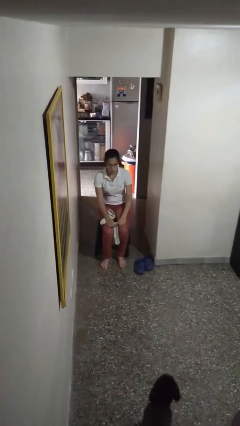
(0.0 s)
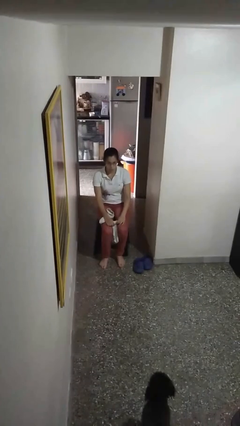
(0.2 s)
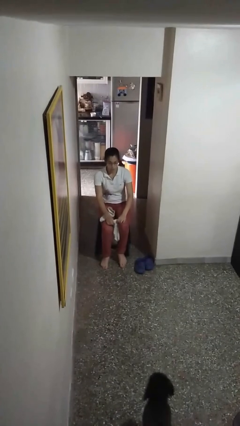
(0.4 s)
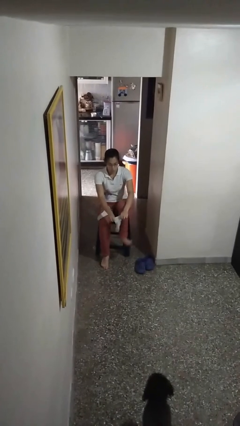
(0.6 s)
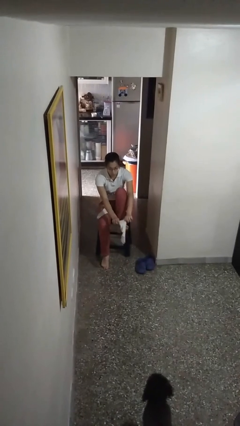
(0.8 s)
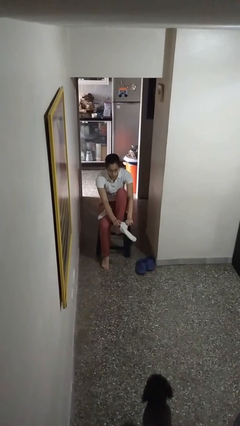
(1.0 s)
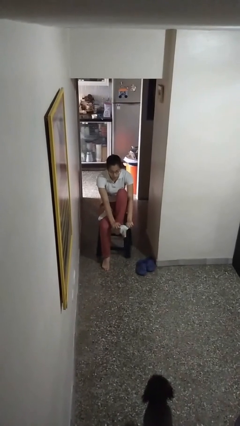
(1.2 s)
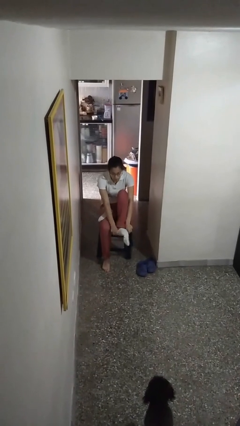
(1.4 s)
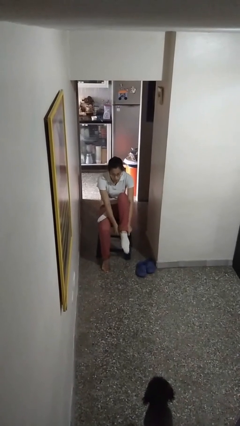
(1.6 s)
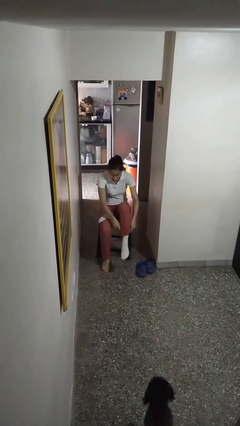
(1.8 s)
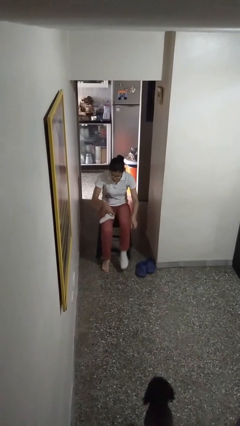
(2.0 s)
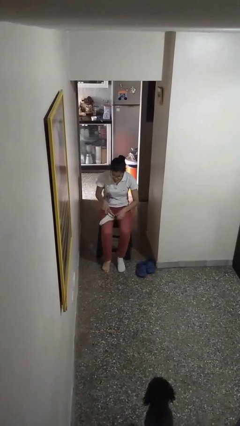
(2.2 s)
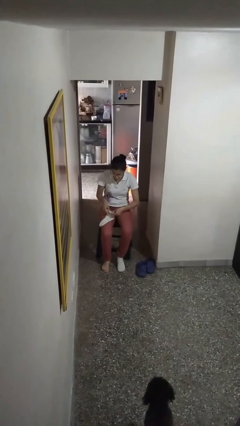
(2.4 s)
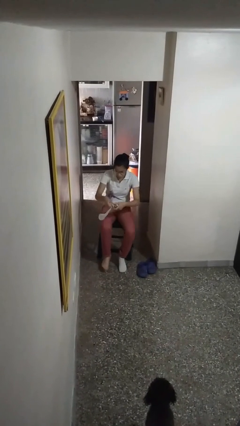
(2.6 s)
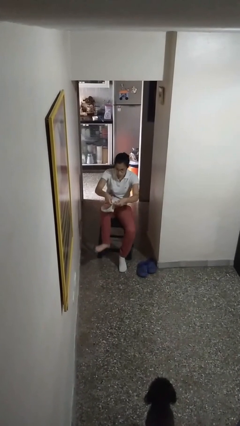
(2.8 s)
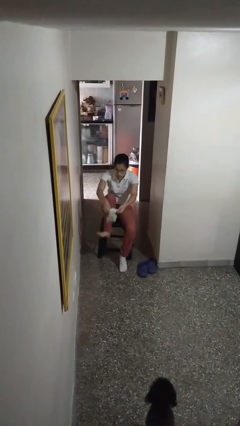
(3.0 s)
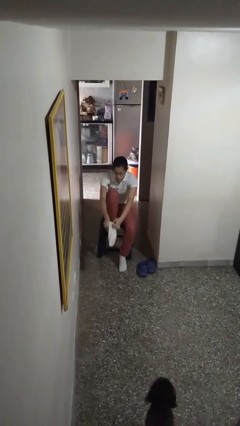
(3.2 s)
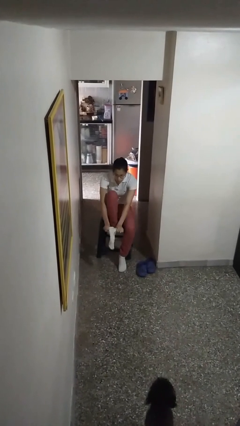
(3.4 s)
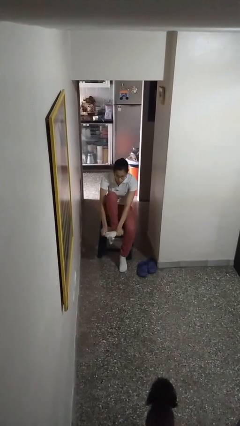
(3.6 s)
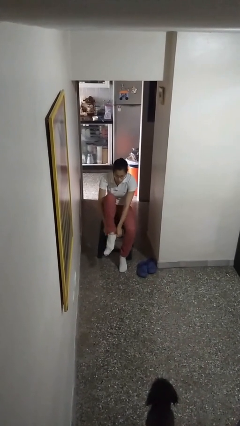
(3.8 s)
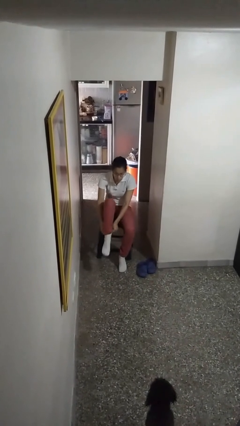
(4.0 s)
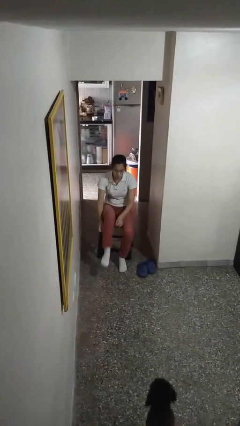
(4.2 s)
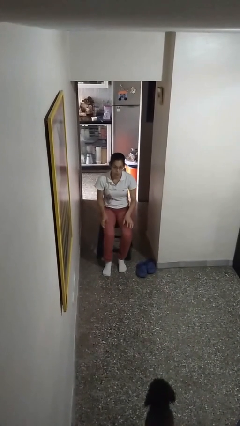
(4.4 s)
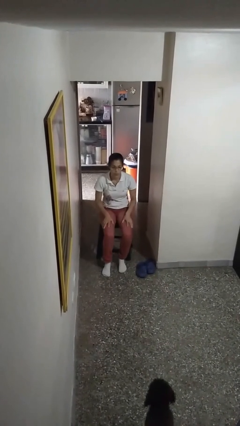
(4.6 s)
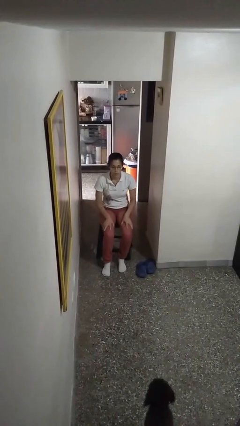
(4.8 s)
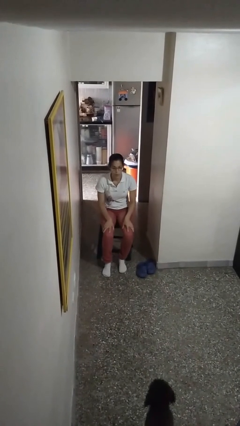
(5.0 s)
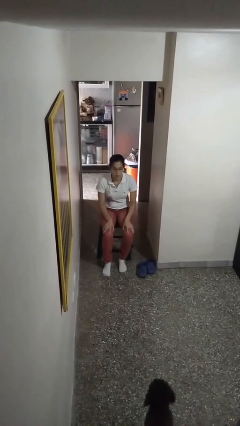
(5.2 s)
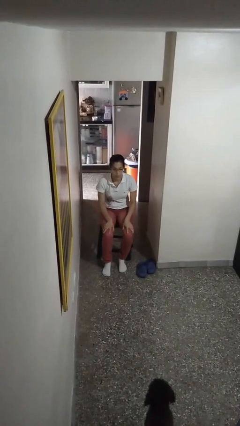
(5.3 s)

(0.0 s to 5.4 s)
person puts on socks

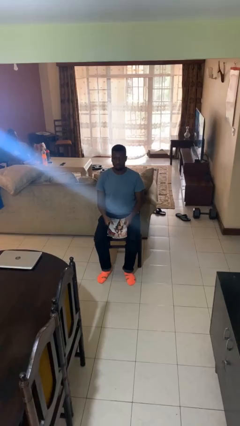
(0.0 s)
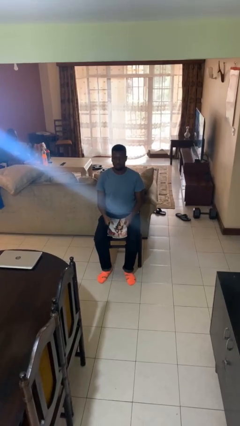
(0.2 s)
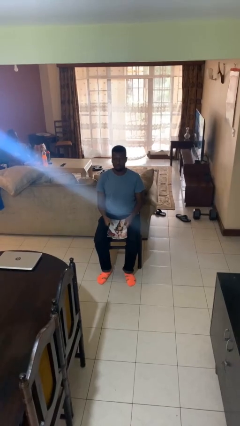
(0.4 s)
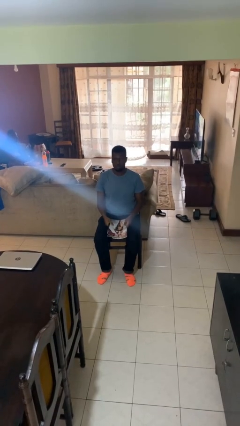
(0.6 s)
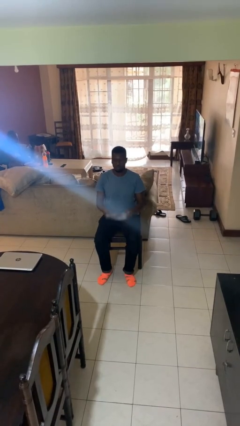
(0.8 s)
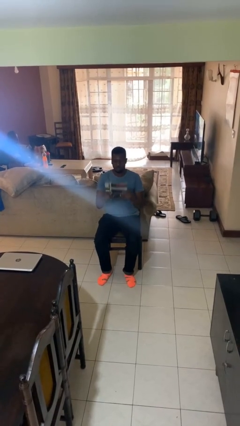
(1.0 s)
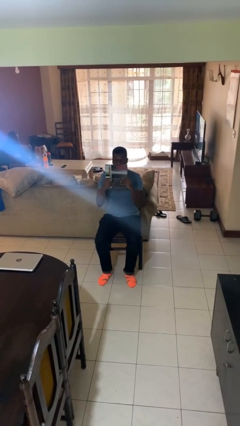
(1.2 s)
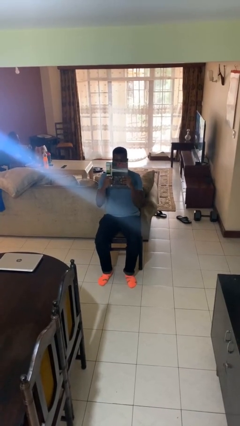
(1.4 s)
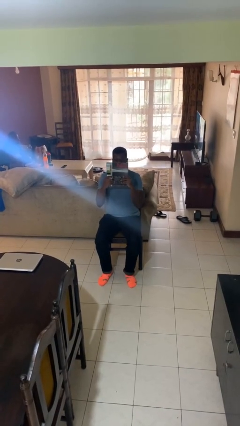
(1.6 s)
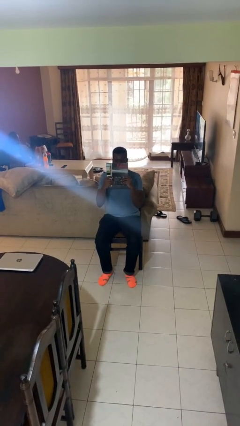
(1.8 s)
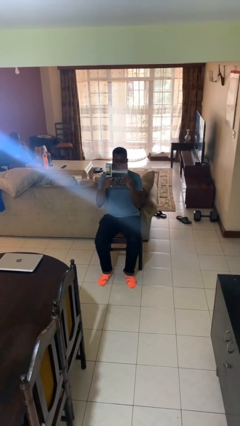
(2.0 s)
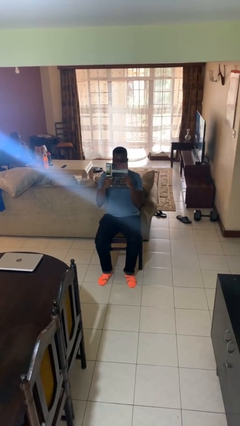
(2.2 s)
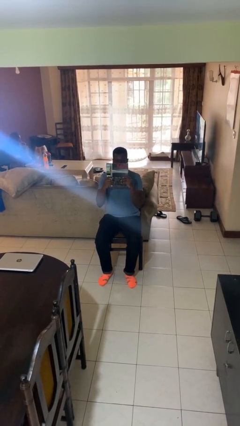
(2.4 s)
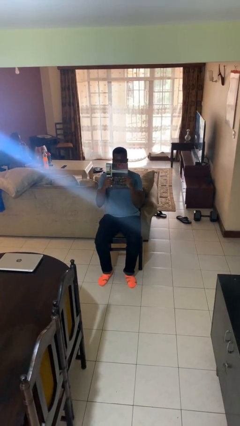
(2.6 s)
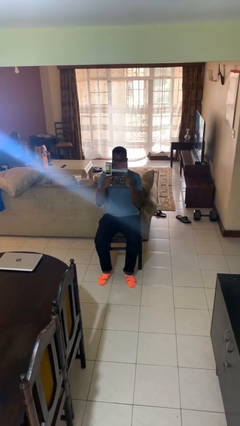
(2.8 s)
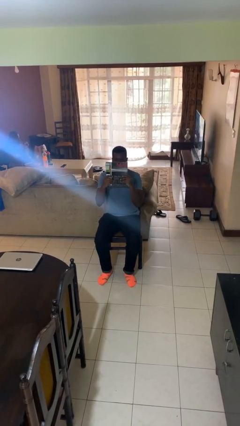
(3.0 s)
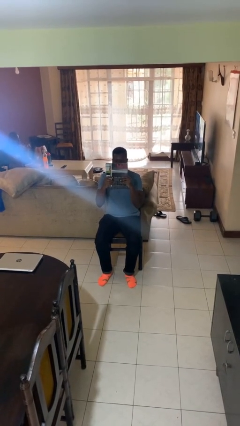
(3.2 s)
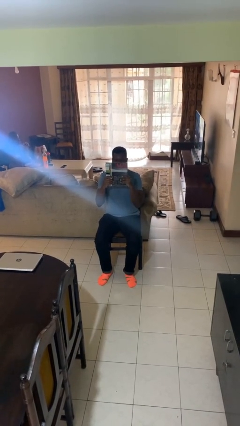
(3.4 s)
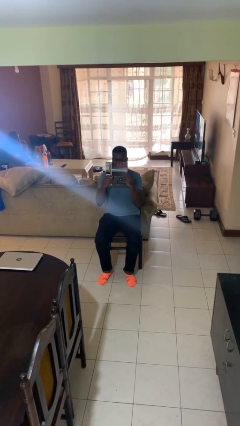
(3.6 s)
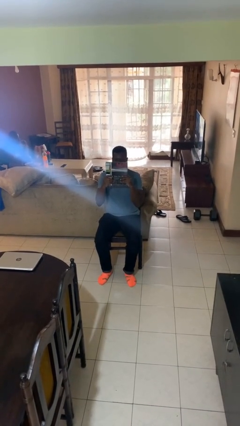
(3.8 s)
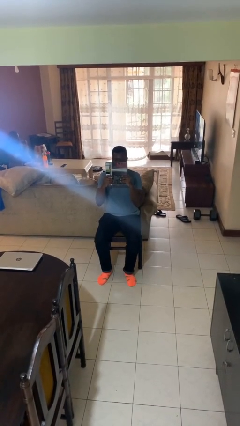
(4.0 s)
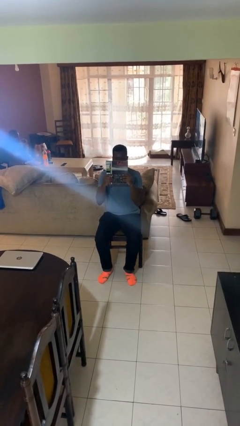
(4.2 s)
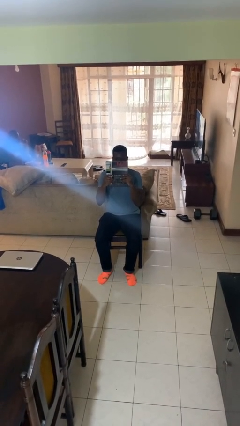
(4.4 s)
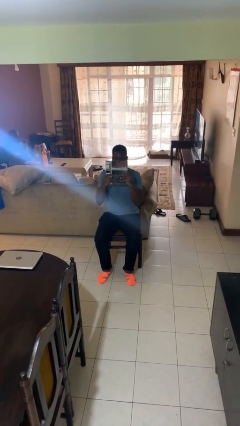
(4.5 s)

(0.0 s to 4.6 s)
person reads document

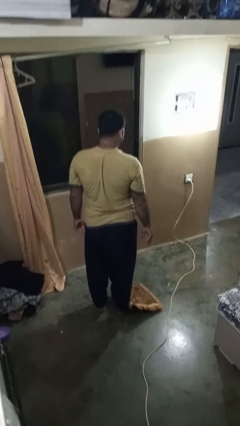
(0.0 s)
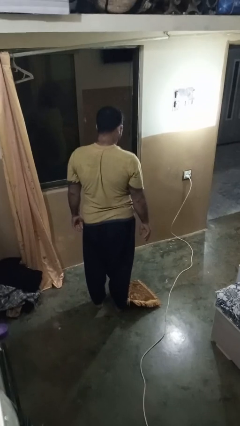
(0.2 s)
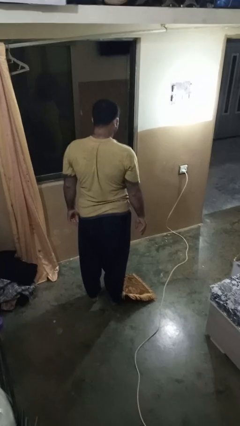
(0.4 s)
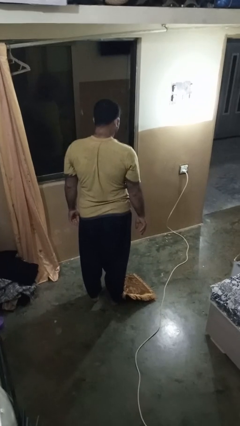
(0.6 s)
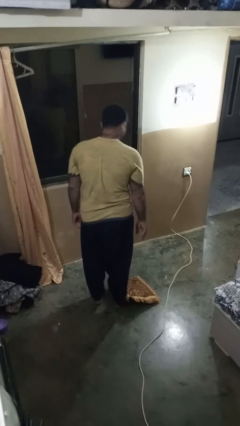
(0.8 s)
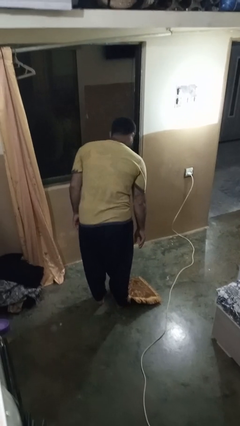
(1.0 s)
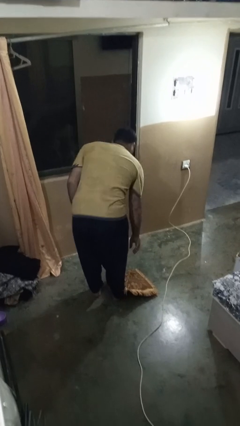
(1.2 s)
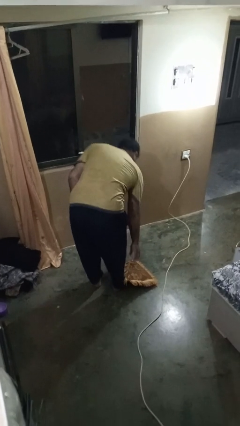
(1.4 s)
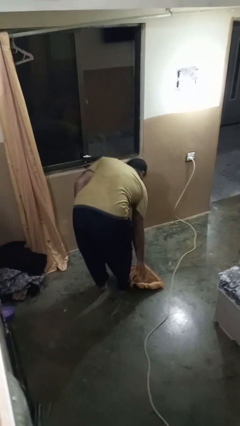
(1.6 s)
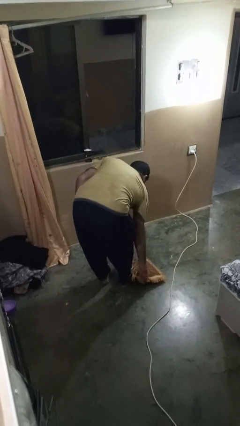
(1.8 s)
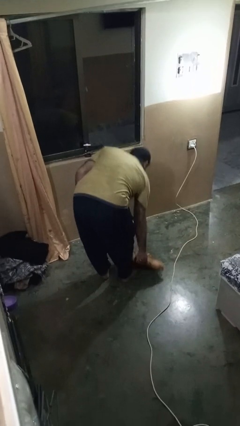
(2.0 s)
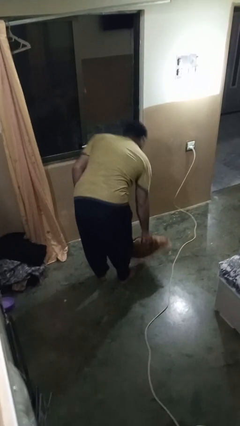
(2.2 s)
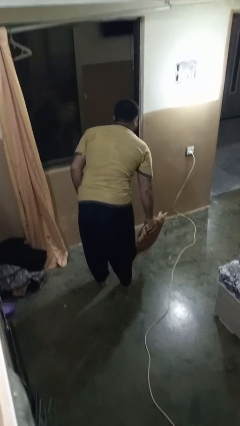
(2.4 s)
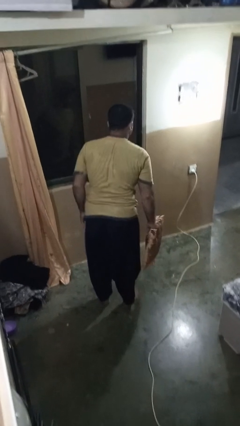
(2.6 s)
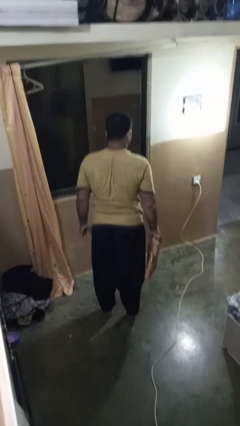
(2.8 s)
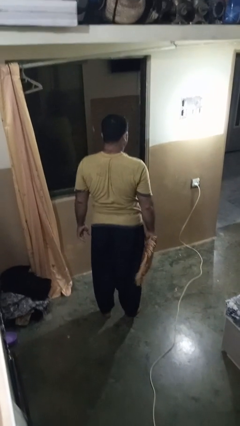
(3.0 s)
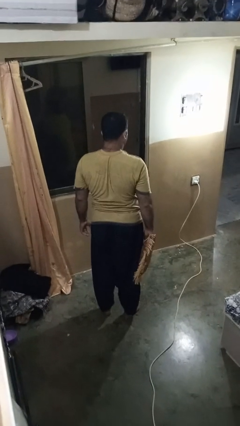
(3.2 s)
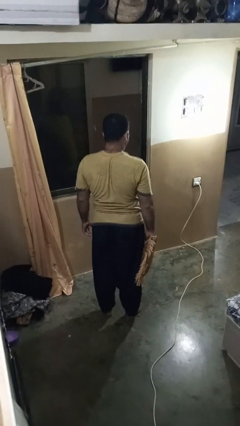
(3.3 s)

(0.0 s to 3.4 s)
person picks up object from floor

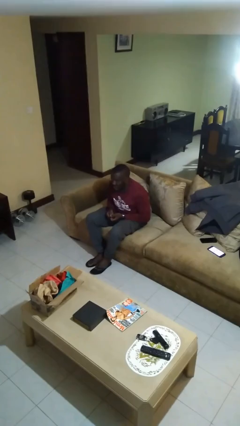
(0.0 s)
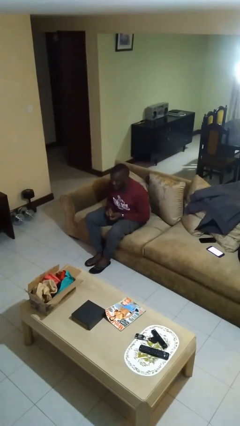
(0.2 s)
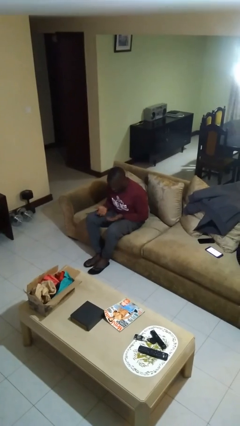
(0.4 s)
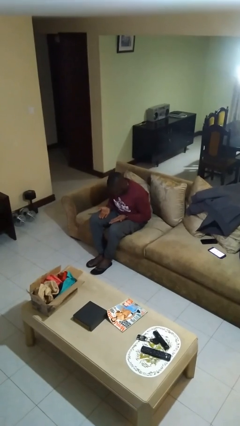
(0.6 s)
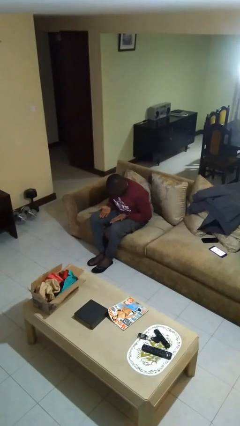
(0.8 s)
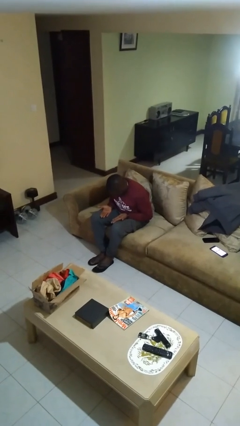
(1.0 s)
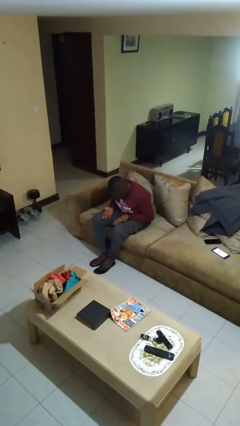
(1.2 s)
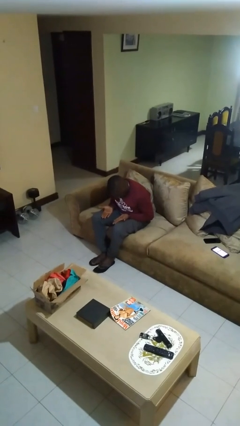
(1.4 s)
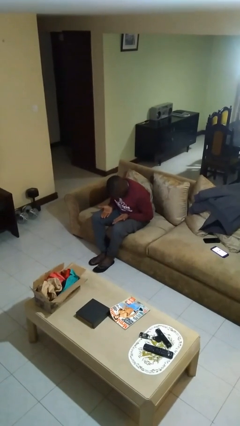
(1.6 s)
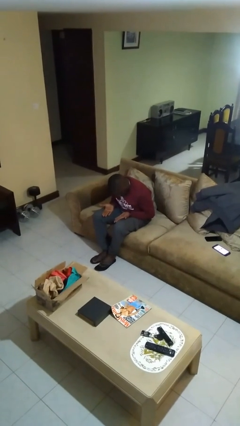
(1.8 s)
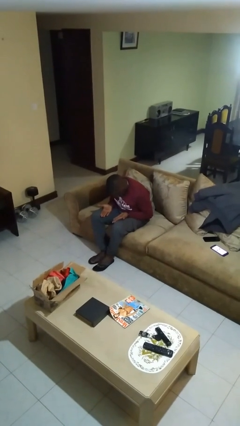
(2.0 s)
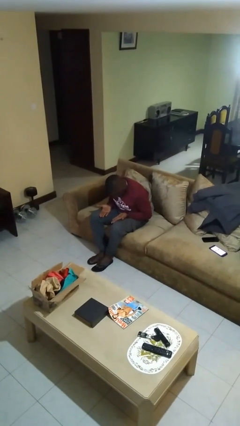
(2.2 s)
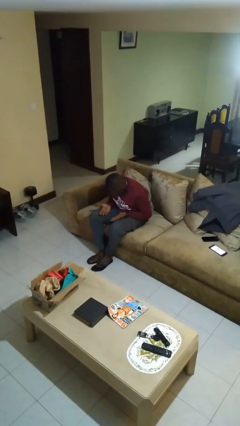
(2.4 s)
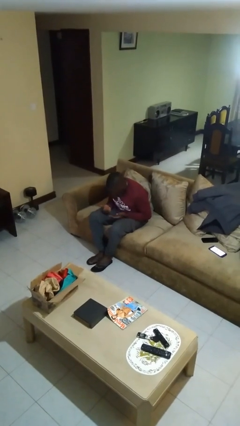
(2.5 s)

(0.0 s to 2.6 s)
person looks at hands in lap

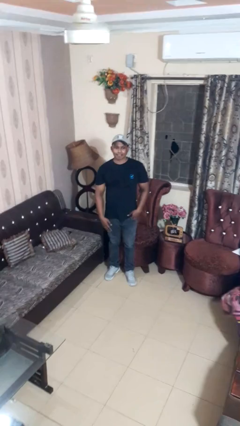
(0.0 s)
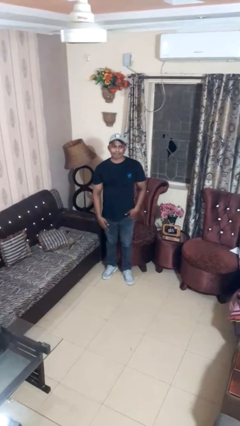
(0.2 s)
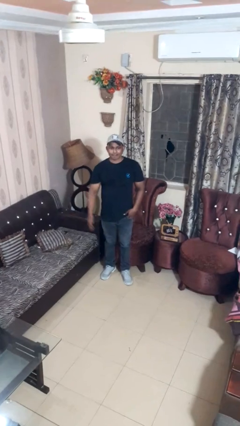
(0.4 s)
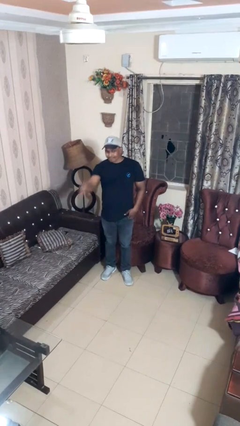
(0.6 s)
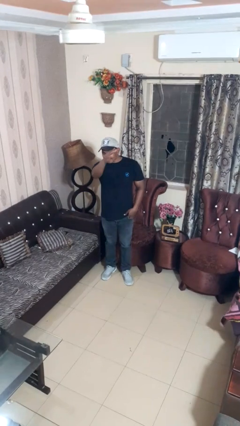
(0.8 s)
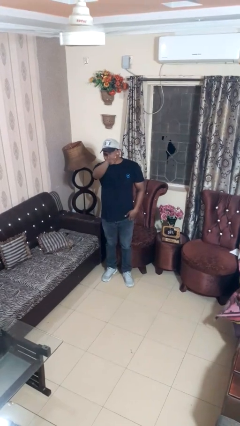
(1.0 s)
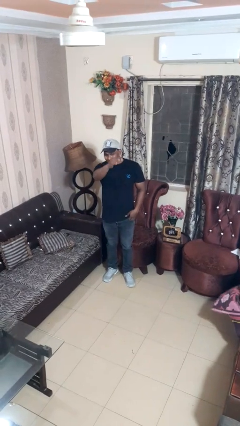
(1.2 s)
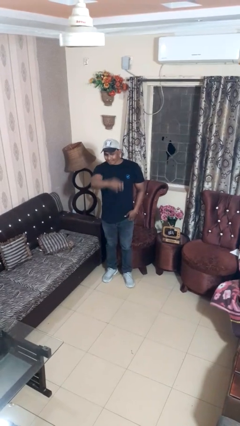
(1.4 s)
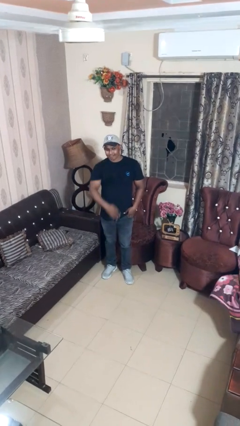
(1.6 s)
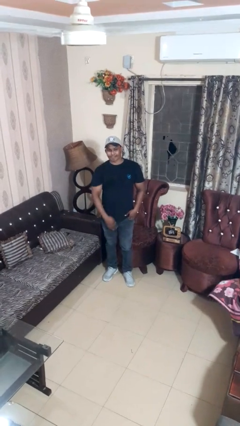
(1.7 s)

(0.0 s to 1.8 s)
person gestures swipe right
